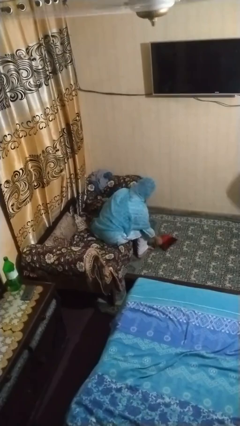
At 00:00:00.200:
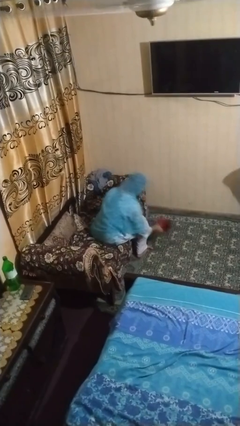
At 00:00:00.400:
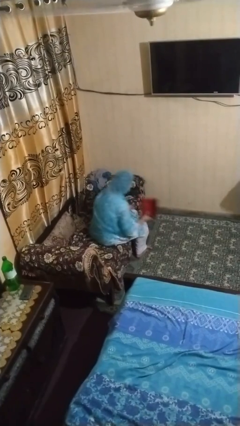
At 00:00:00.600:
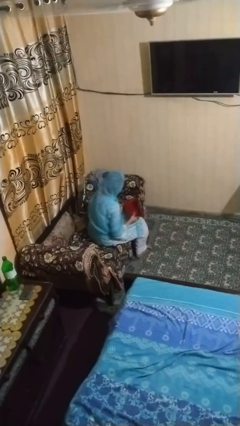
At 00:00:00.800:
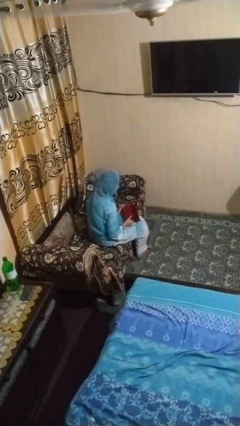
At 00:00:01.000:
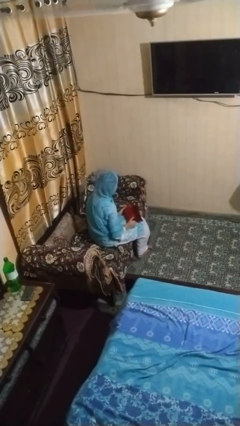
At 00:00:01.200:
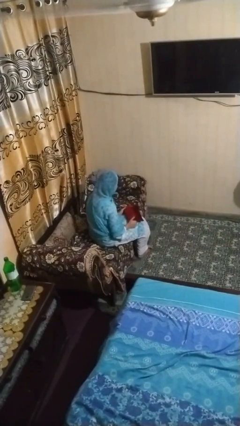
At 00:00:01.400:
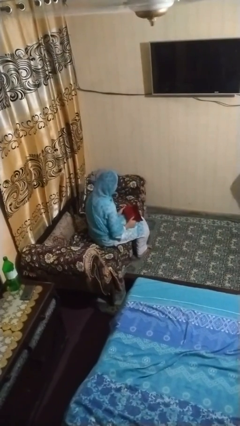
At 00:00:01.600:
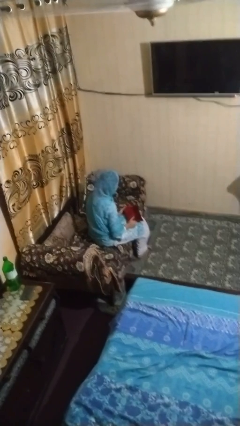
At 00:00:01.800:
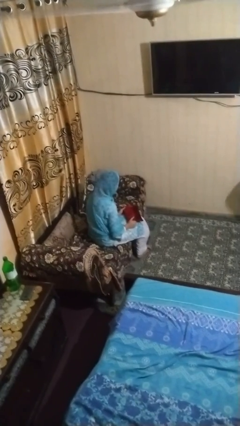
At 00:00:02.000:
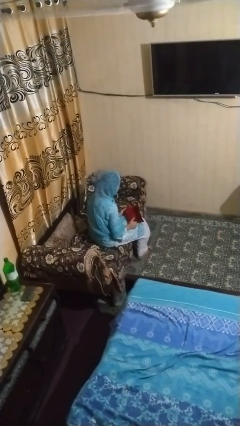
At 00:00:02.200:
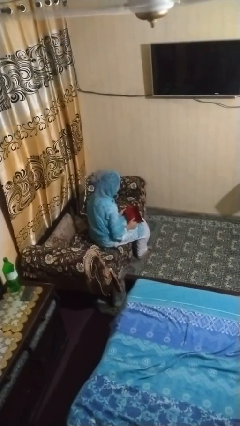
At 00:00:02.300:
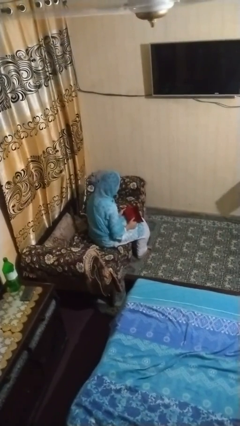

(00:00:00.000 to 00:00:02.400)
person picks up object from floor

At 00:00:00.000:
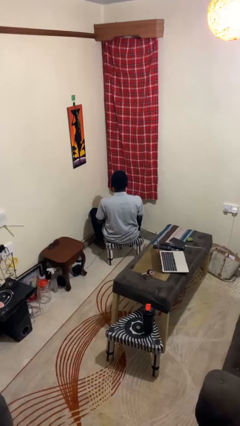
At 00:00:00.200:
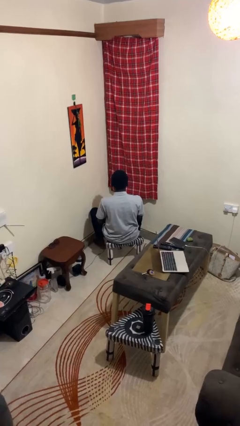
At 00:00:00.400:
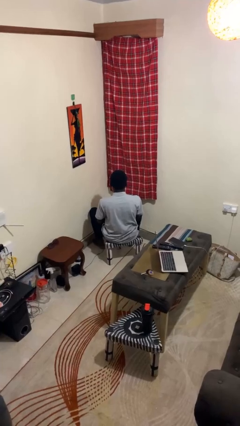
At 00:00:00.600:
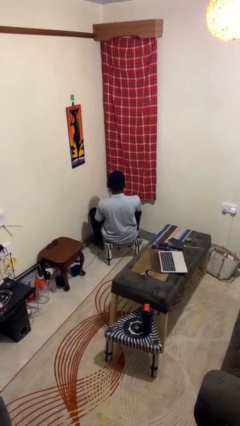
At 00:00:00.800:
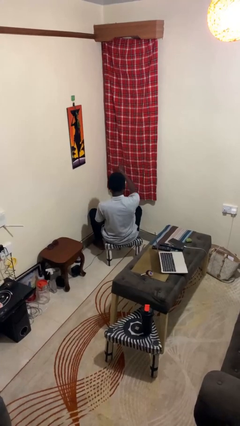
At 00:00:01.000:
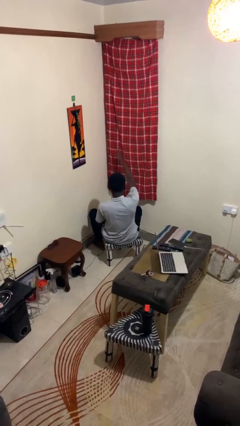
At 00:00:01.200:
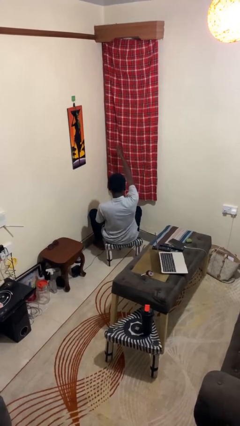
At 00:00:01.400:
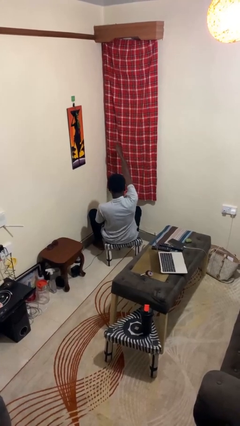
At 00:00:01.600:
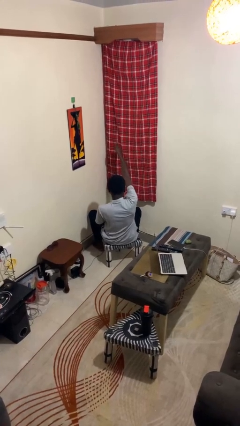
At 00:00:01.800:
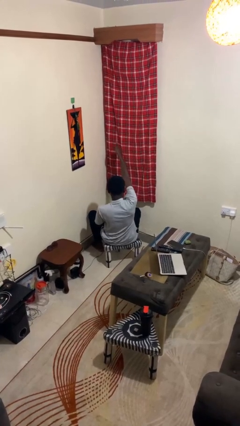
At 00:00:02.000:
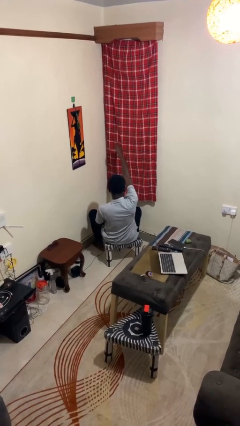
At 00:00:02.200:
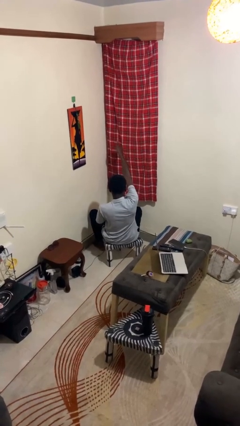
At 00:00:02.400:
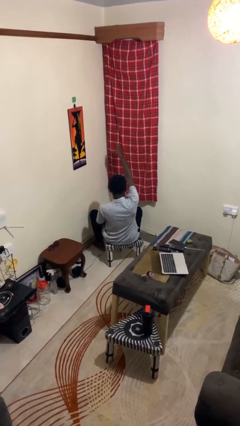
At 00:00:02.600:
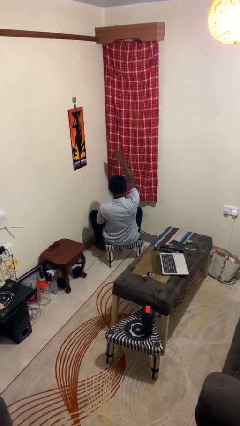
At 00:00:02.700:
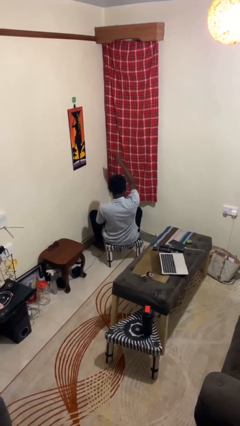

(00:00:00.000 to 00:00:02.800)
person gestures thumbs up

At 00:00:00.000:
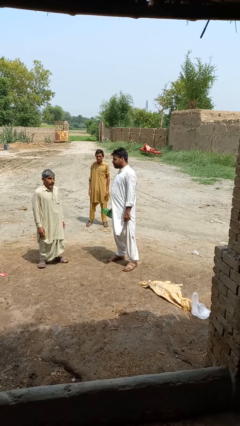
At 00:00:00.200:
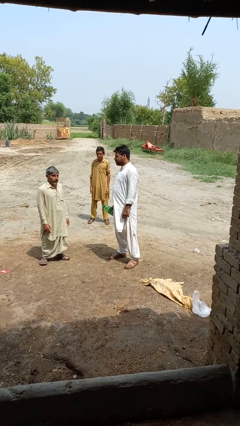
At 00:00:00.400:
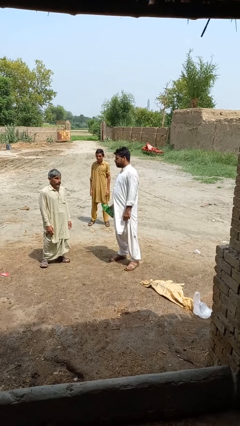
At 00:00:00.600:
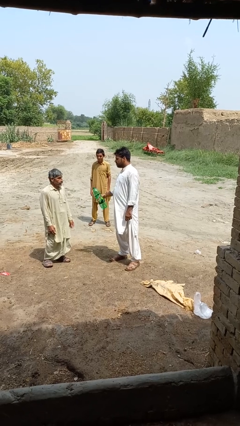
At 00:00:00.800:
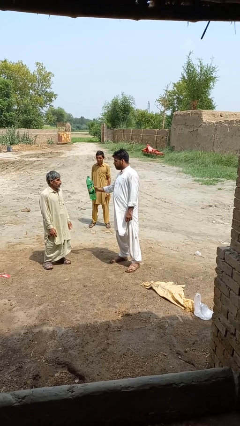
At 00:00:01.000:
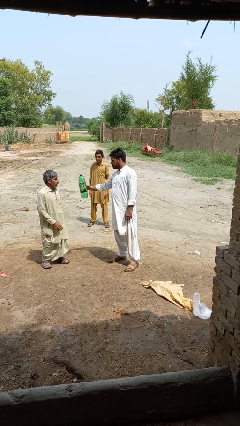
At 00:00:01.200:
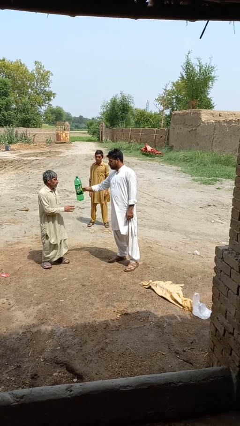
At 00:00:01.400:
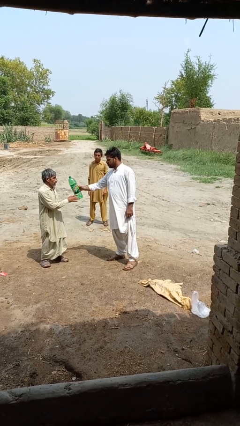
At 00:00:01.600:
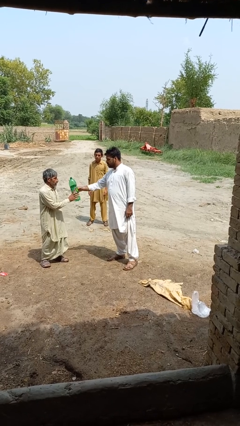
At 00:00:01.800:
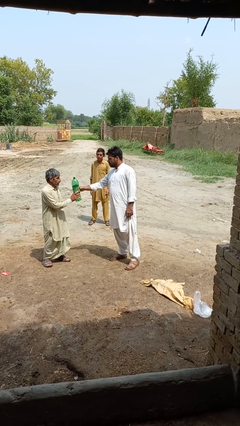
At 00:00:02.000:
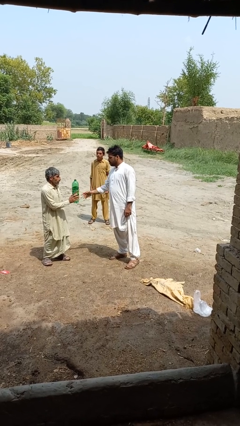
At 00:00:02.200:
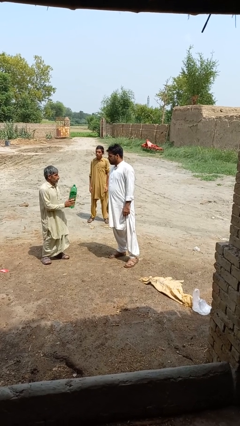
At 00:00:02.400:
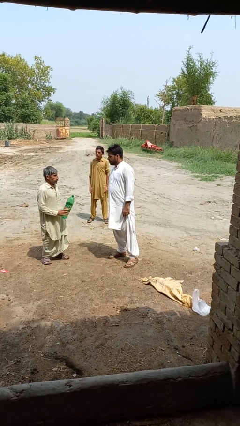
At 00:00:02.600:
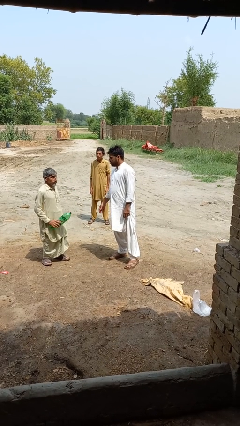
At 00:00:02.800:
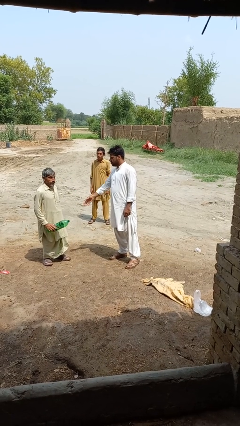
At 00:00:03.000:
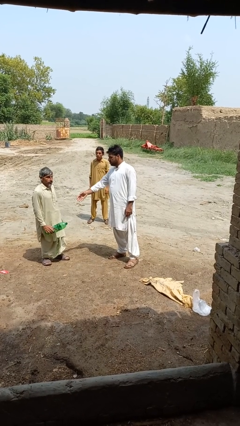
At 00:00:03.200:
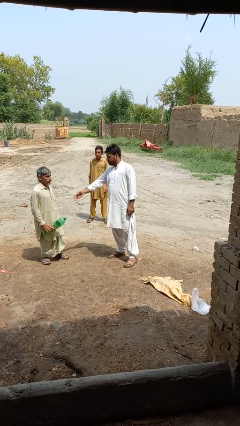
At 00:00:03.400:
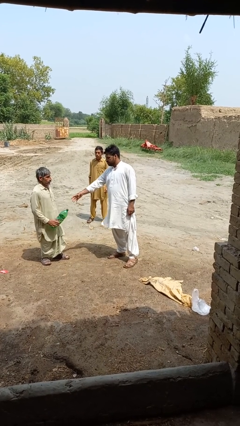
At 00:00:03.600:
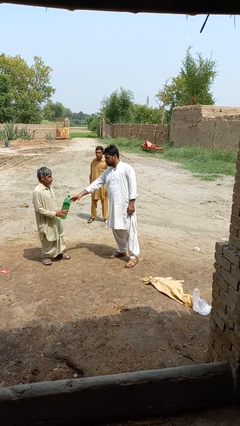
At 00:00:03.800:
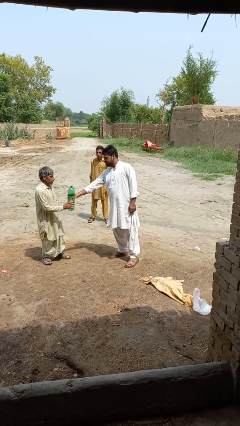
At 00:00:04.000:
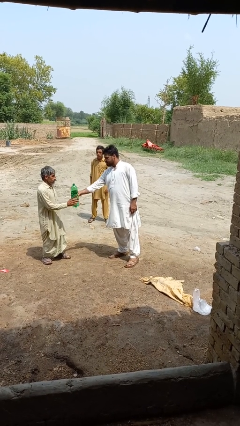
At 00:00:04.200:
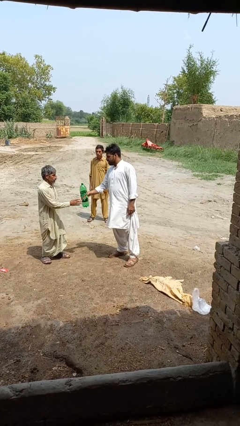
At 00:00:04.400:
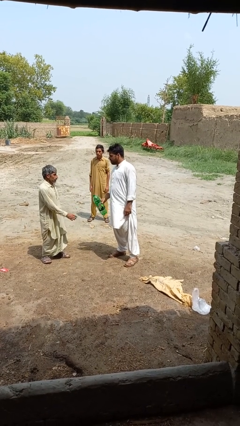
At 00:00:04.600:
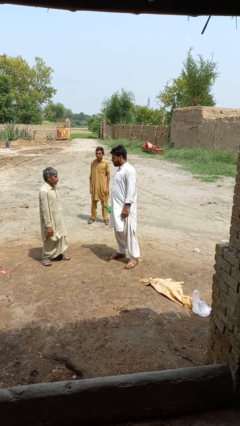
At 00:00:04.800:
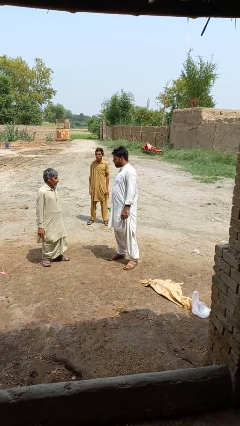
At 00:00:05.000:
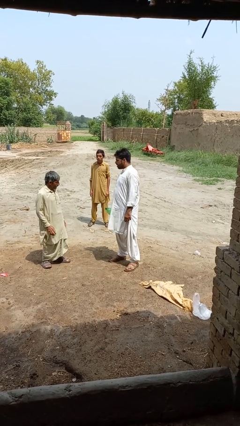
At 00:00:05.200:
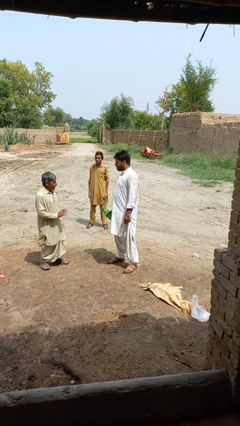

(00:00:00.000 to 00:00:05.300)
person transfers object to person

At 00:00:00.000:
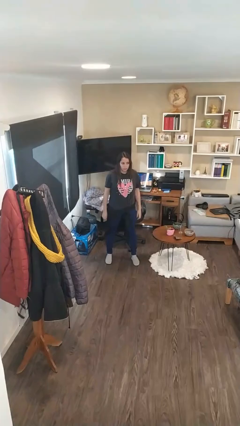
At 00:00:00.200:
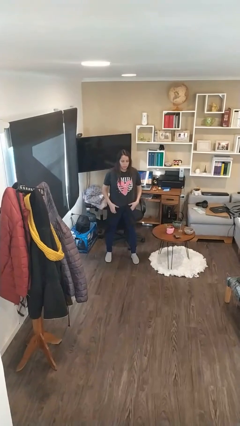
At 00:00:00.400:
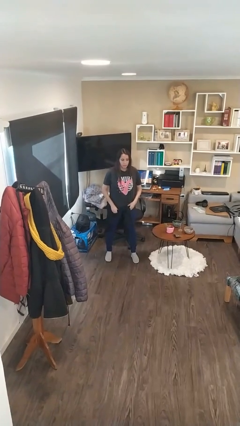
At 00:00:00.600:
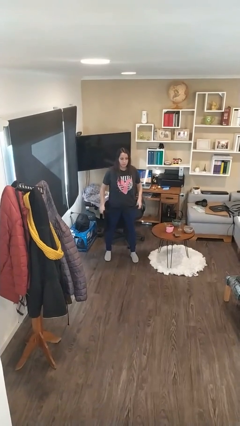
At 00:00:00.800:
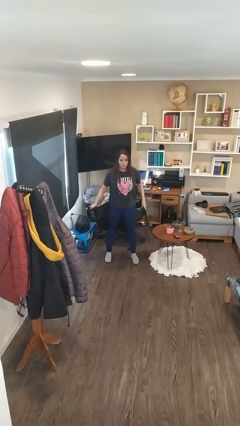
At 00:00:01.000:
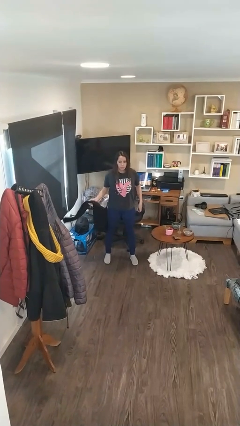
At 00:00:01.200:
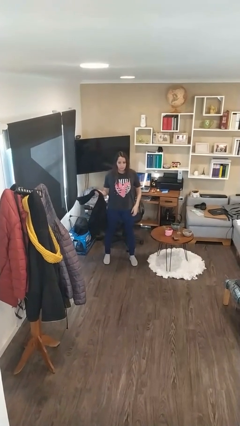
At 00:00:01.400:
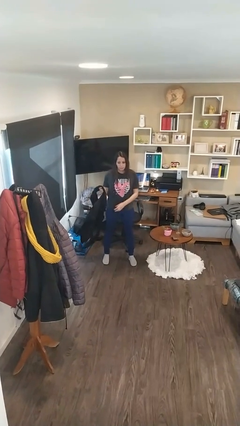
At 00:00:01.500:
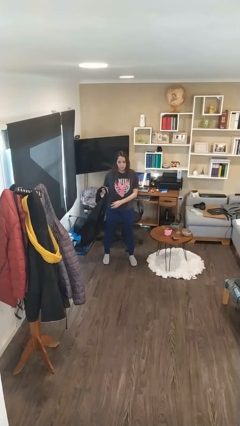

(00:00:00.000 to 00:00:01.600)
person unties jacket around waist

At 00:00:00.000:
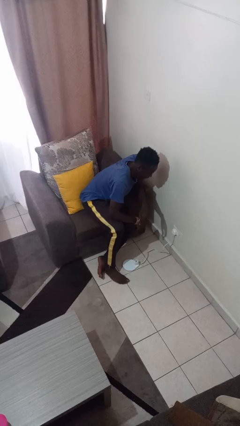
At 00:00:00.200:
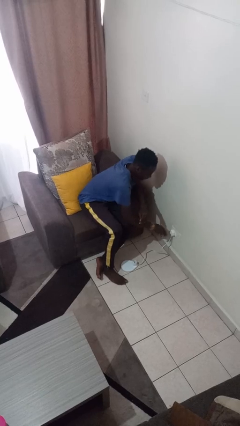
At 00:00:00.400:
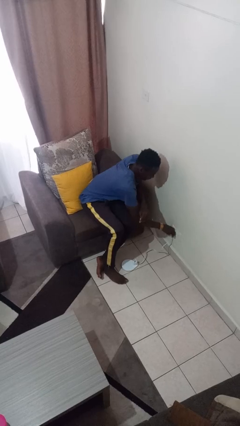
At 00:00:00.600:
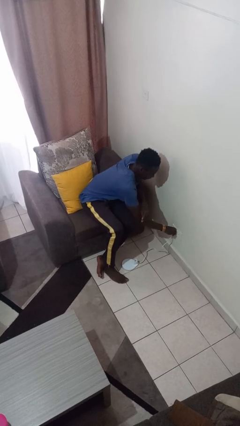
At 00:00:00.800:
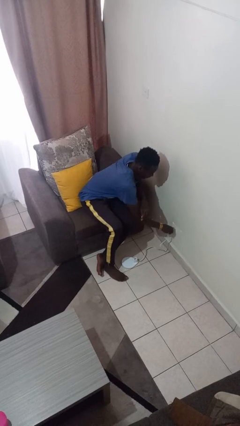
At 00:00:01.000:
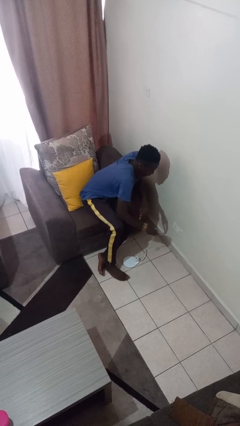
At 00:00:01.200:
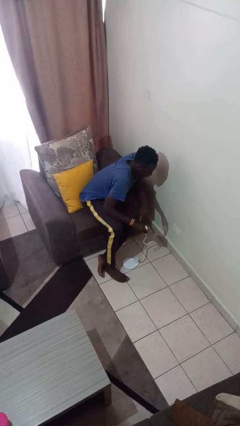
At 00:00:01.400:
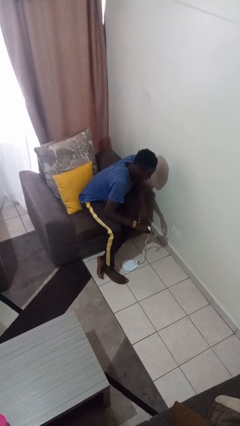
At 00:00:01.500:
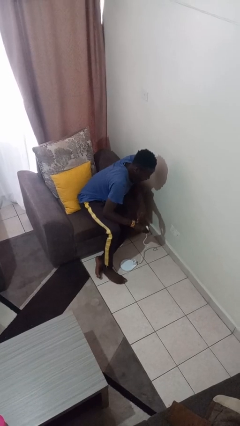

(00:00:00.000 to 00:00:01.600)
person unplugs from electrical socket

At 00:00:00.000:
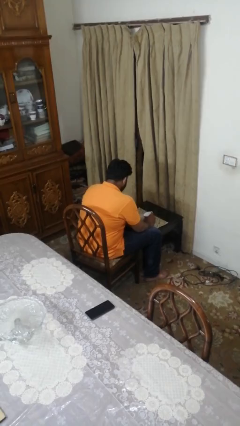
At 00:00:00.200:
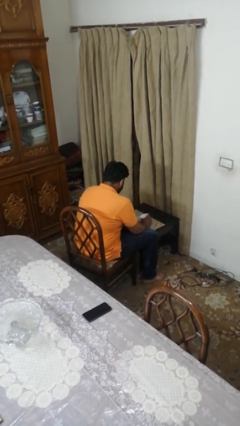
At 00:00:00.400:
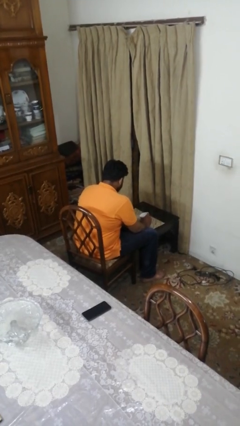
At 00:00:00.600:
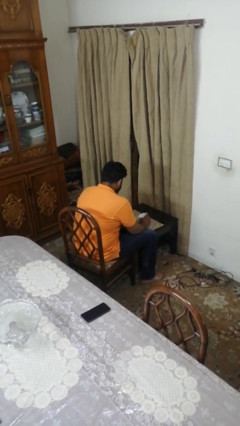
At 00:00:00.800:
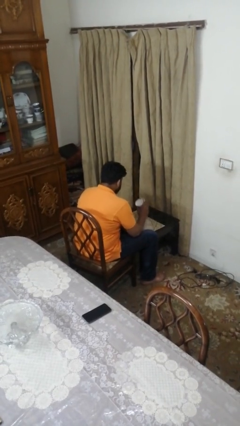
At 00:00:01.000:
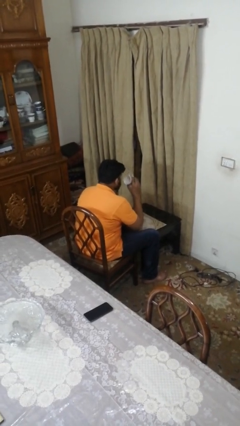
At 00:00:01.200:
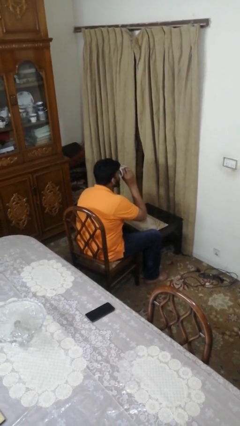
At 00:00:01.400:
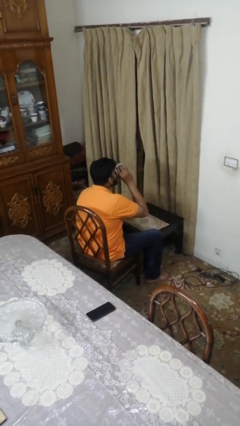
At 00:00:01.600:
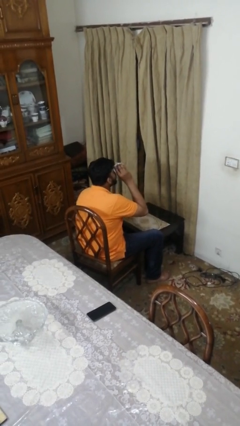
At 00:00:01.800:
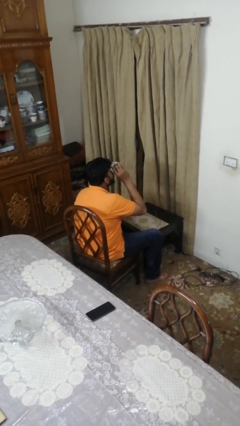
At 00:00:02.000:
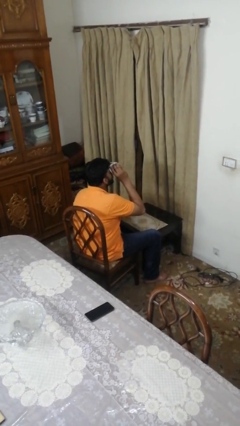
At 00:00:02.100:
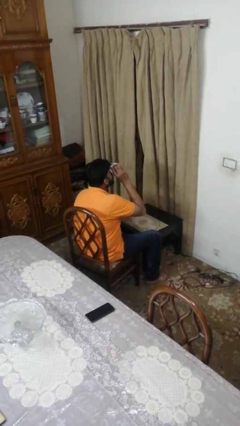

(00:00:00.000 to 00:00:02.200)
person drinks from mug

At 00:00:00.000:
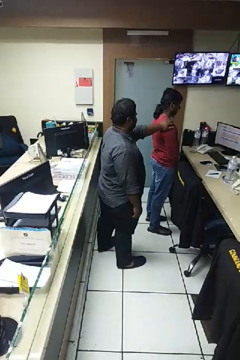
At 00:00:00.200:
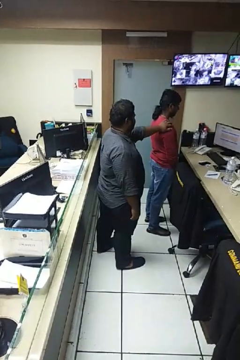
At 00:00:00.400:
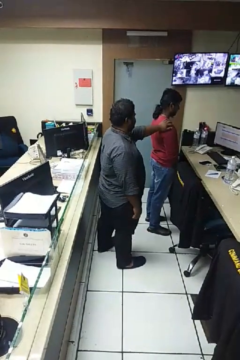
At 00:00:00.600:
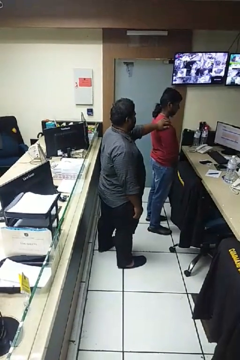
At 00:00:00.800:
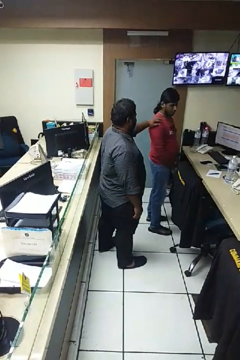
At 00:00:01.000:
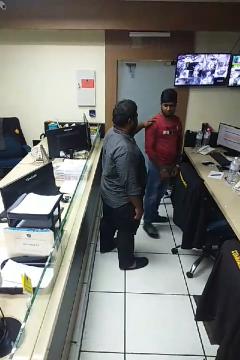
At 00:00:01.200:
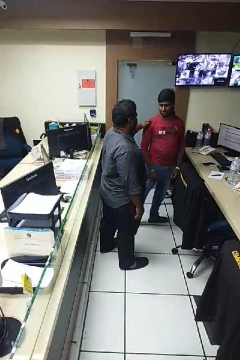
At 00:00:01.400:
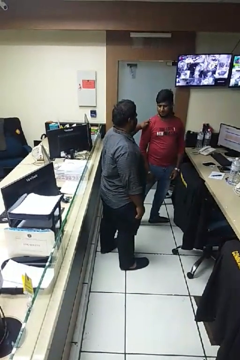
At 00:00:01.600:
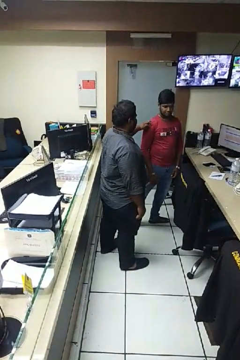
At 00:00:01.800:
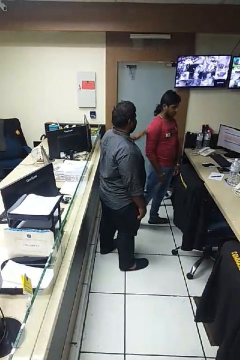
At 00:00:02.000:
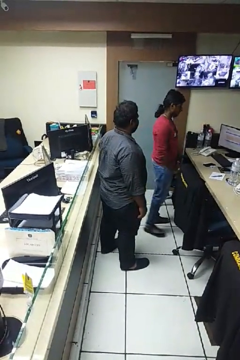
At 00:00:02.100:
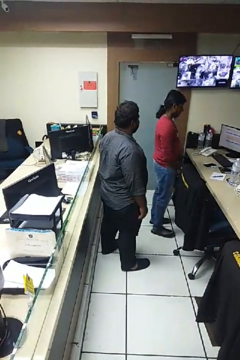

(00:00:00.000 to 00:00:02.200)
person spins person around
